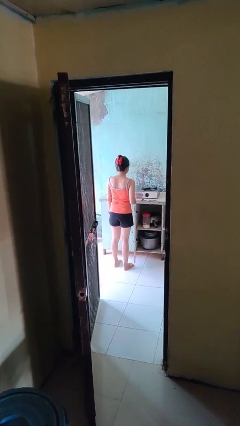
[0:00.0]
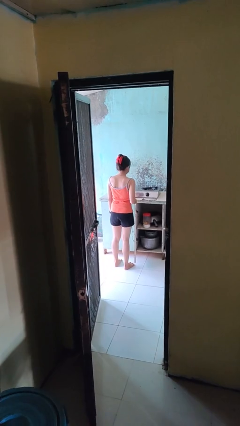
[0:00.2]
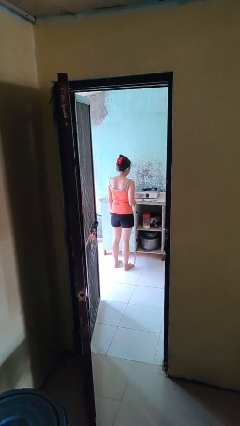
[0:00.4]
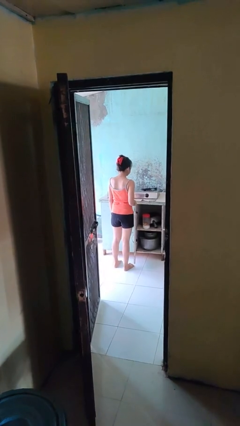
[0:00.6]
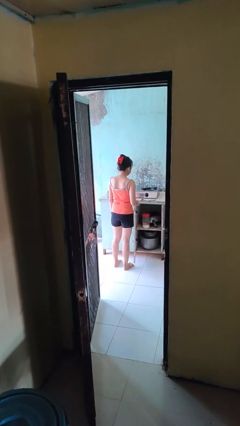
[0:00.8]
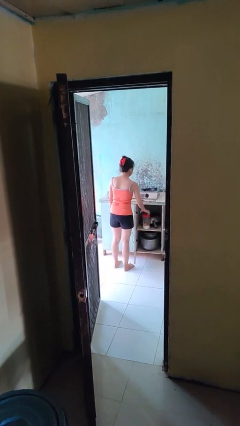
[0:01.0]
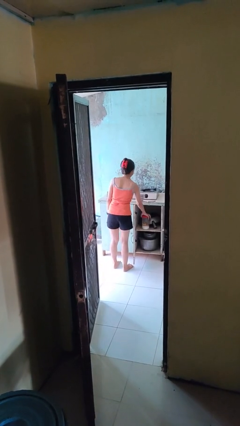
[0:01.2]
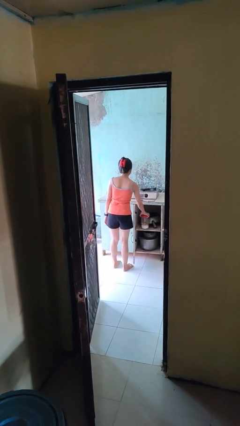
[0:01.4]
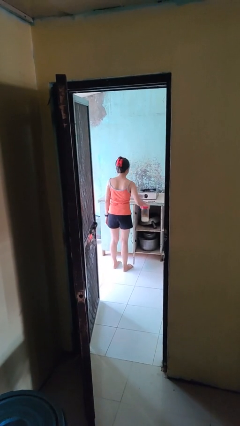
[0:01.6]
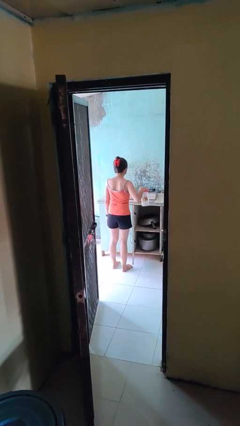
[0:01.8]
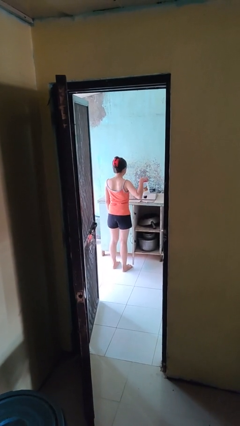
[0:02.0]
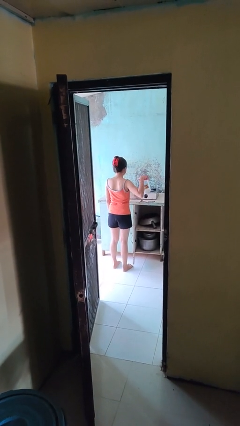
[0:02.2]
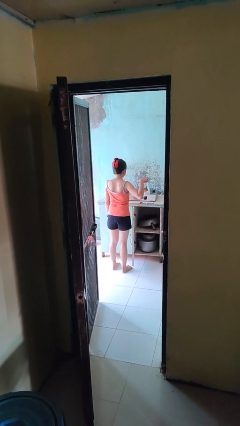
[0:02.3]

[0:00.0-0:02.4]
person picks up object from cabinet

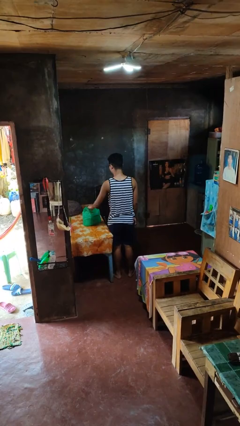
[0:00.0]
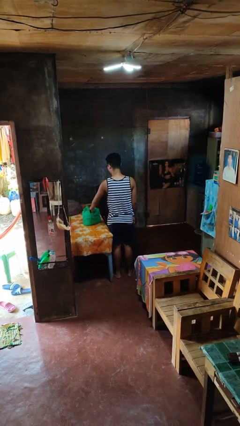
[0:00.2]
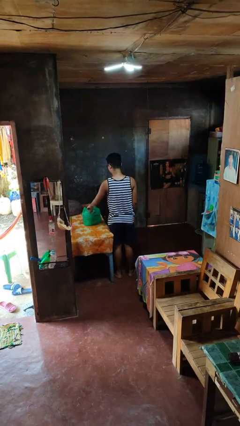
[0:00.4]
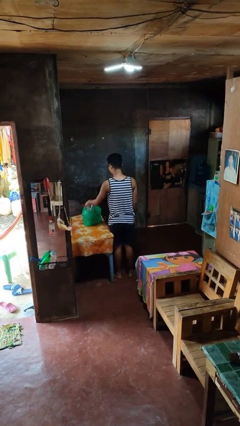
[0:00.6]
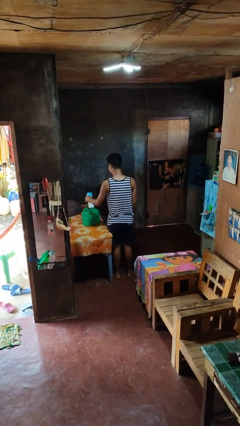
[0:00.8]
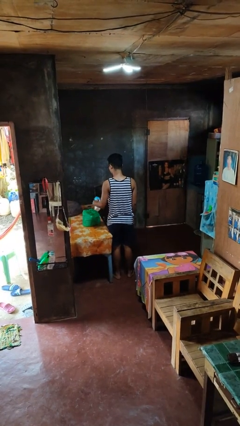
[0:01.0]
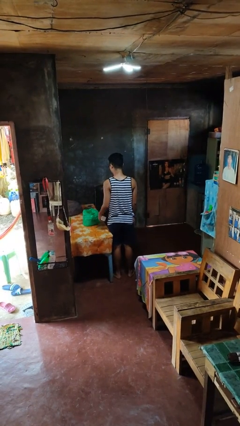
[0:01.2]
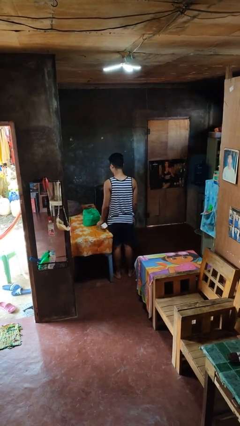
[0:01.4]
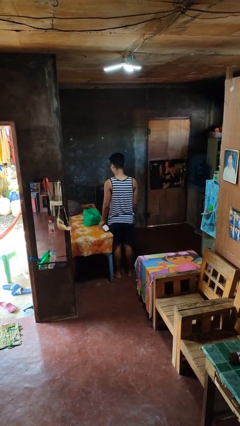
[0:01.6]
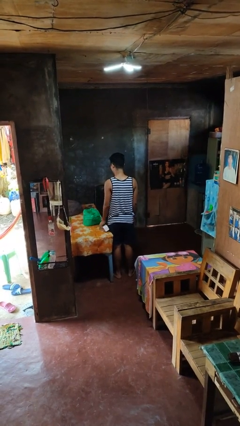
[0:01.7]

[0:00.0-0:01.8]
person takes object from bag

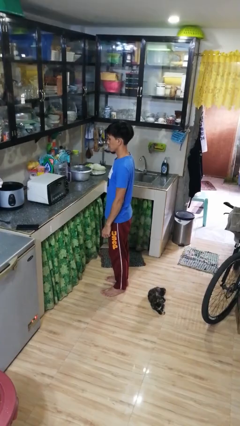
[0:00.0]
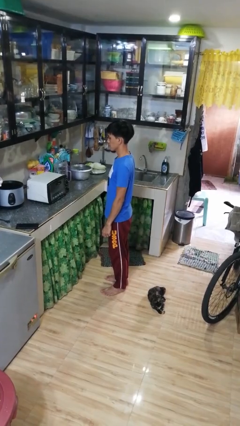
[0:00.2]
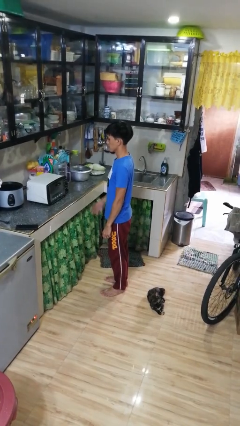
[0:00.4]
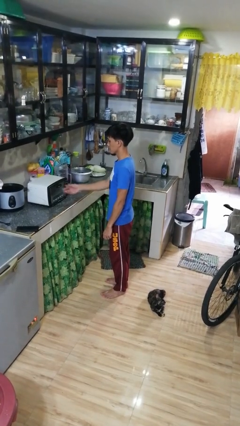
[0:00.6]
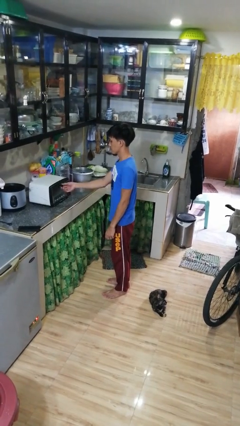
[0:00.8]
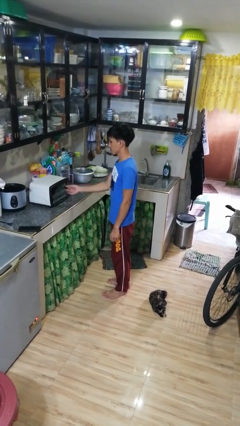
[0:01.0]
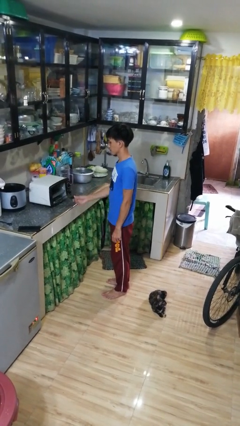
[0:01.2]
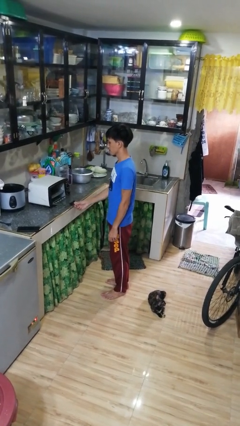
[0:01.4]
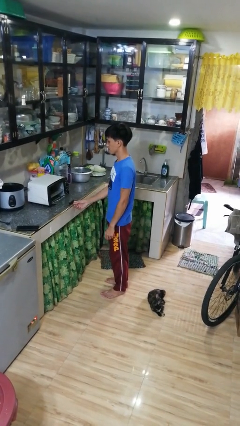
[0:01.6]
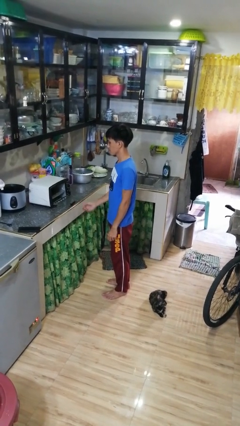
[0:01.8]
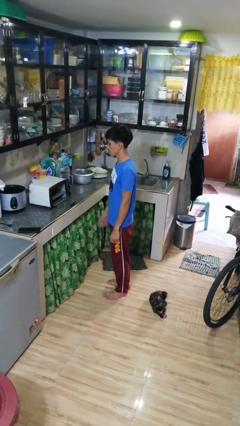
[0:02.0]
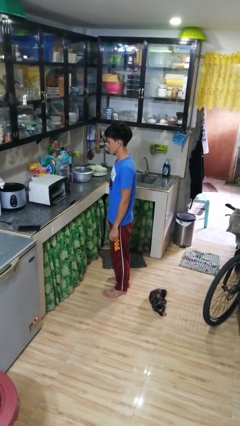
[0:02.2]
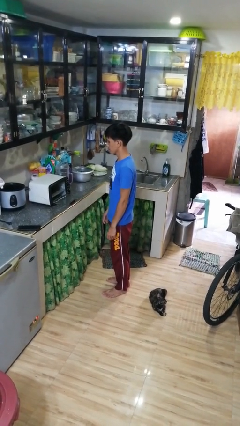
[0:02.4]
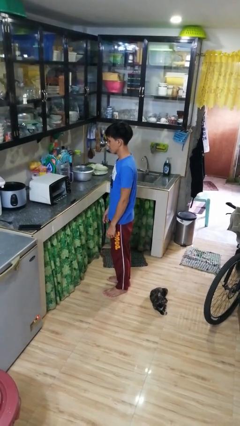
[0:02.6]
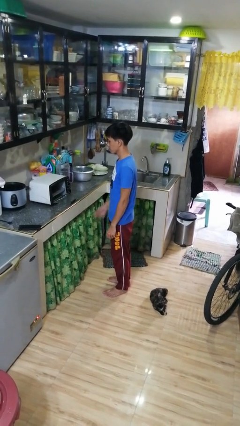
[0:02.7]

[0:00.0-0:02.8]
person opens microwave

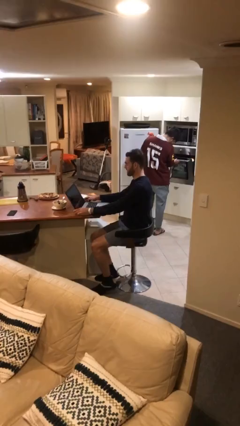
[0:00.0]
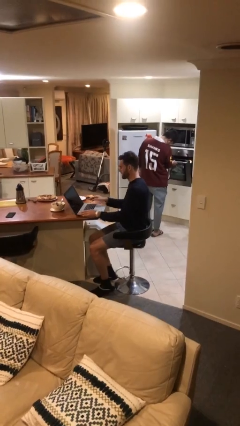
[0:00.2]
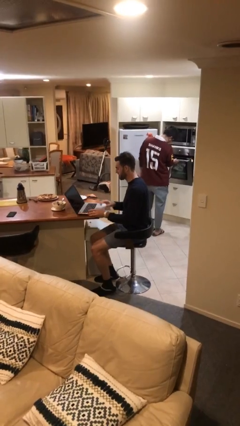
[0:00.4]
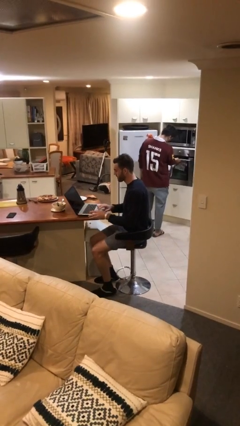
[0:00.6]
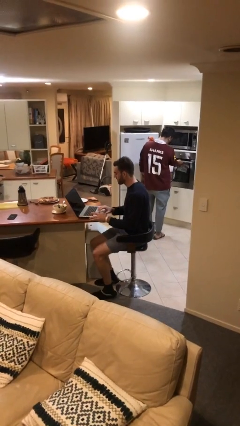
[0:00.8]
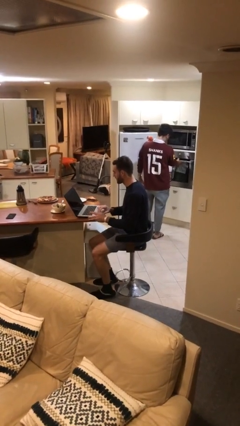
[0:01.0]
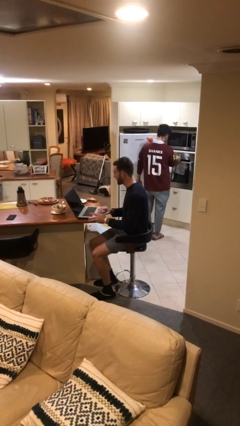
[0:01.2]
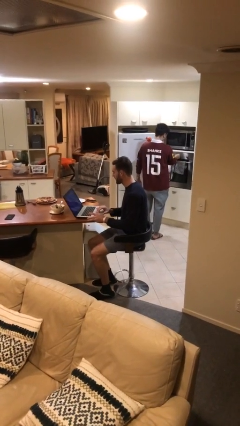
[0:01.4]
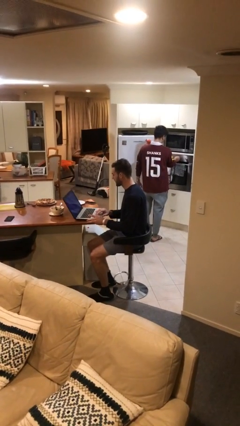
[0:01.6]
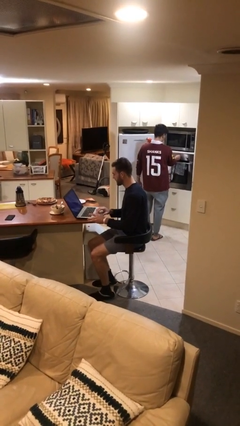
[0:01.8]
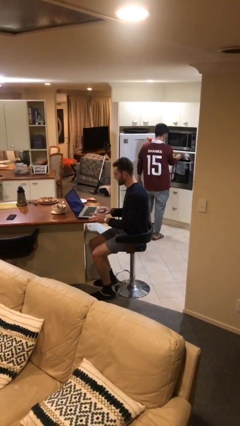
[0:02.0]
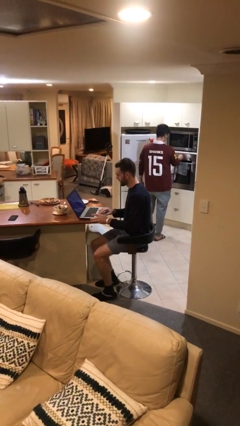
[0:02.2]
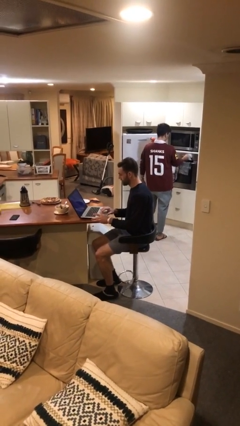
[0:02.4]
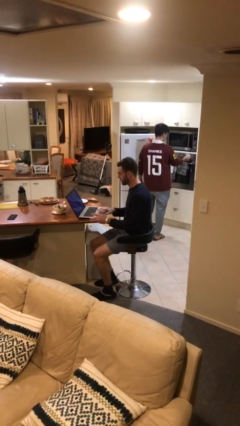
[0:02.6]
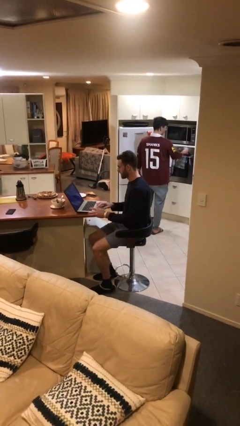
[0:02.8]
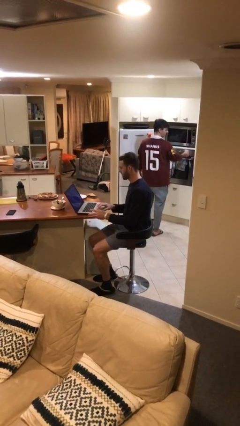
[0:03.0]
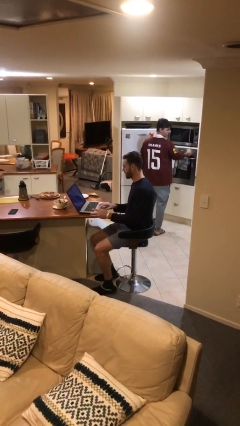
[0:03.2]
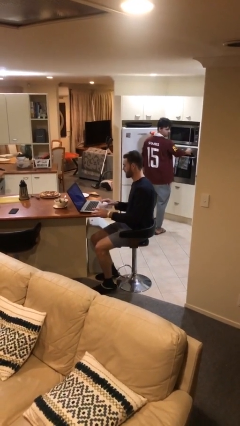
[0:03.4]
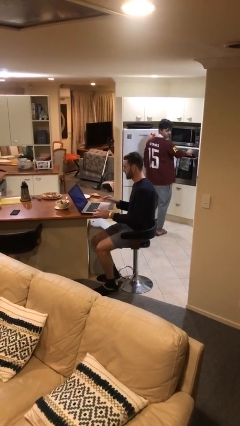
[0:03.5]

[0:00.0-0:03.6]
person interacts with laptop

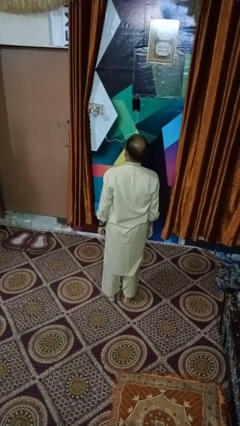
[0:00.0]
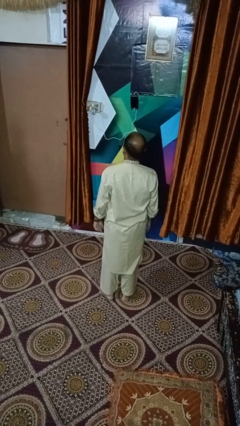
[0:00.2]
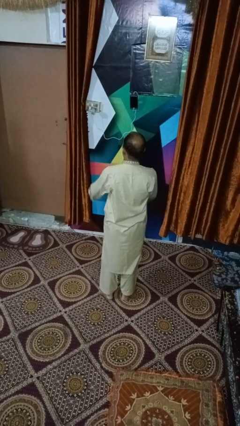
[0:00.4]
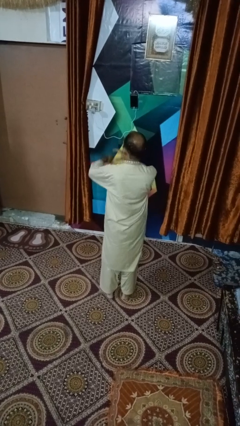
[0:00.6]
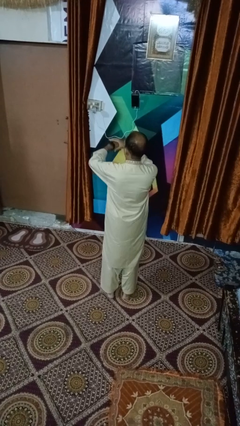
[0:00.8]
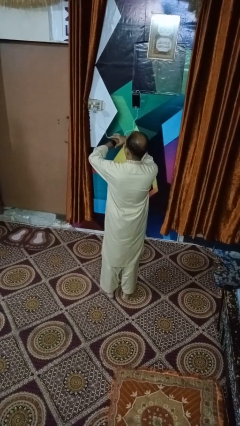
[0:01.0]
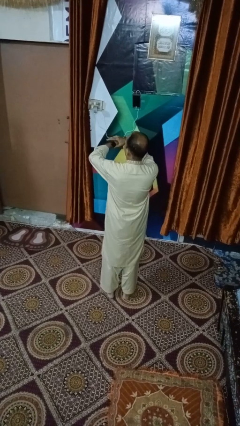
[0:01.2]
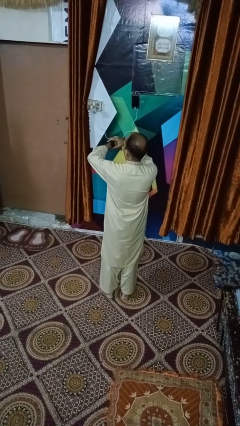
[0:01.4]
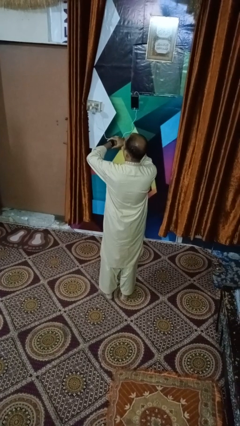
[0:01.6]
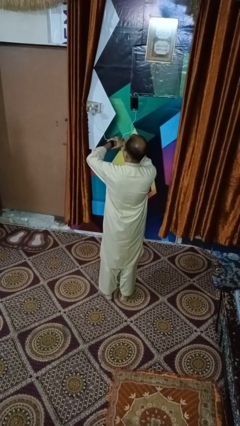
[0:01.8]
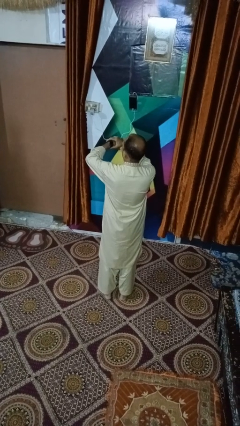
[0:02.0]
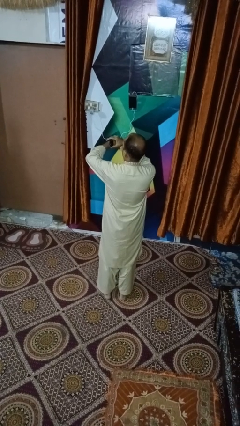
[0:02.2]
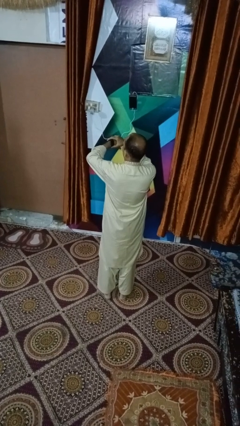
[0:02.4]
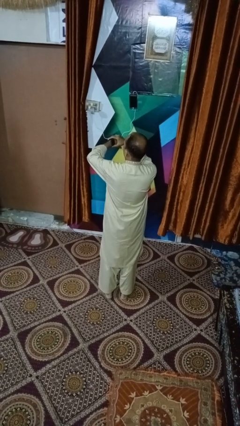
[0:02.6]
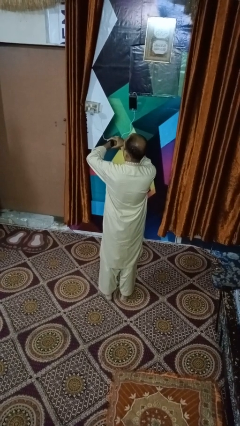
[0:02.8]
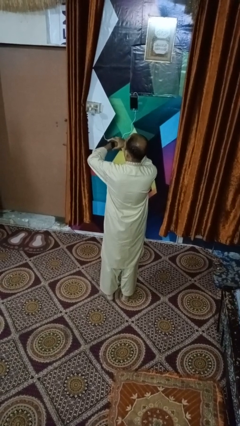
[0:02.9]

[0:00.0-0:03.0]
person looks at wristwatch

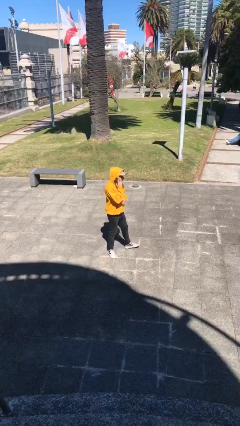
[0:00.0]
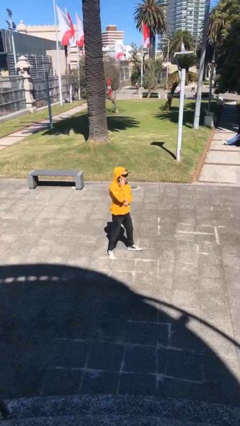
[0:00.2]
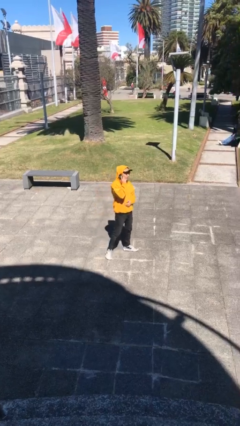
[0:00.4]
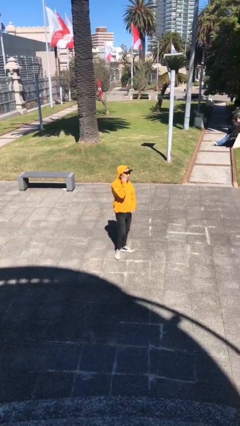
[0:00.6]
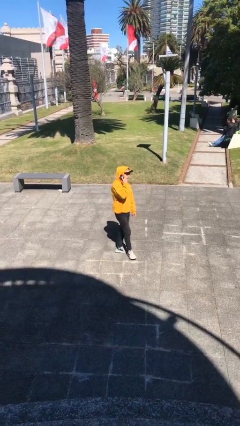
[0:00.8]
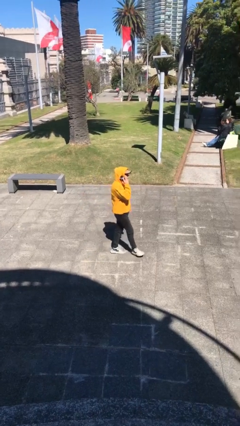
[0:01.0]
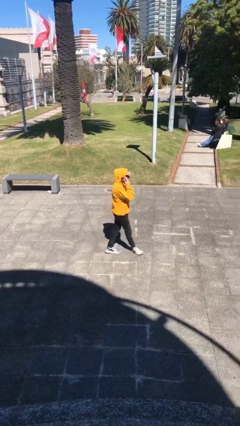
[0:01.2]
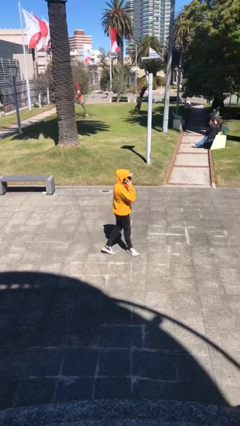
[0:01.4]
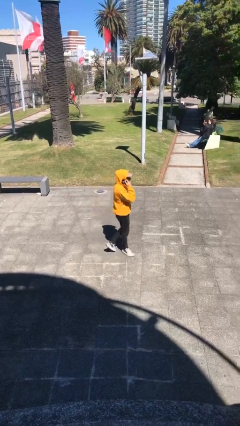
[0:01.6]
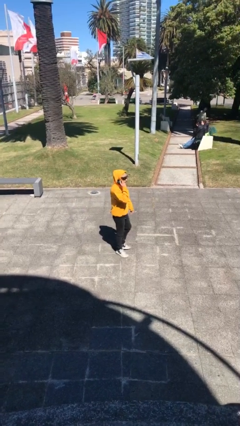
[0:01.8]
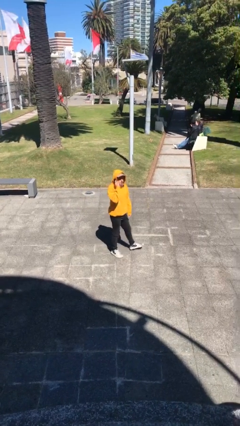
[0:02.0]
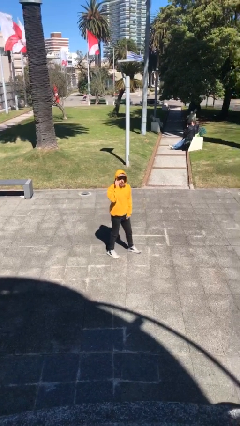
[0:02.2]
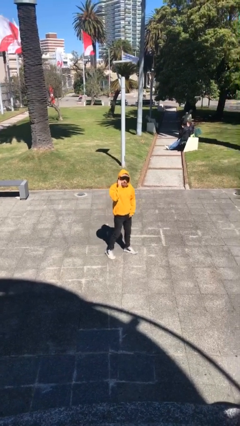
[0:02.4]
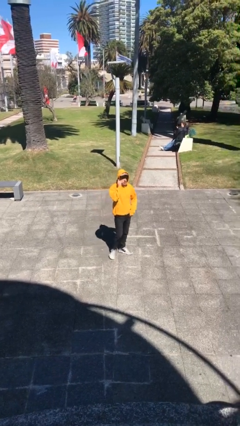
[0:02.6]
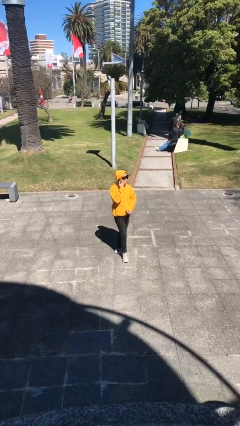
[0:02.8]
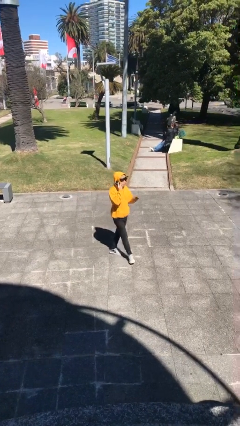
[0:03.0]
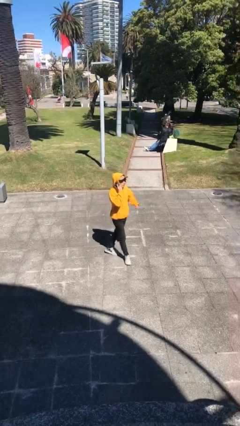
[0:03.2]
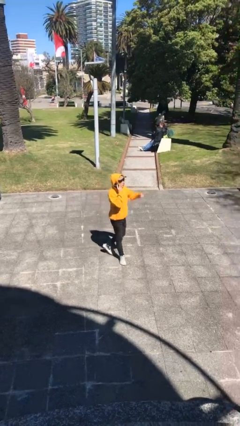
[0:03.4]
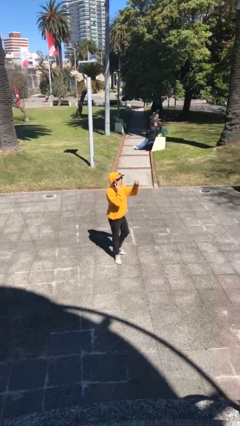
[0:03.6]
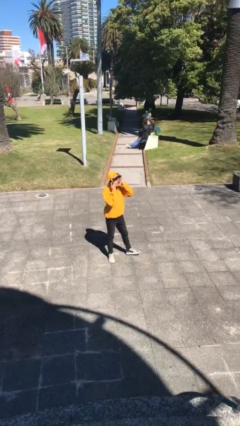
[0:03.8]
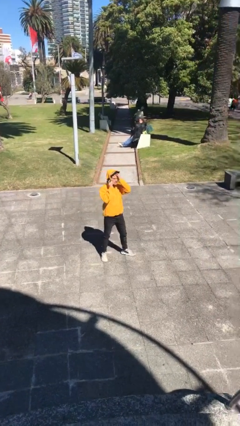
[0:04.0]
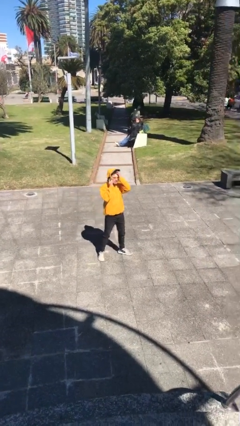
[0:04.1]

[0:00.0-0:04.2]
person talks on phone
